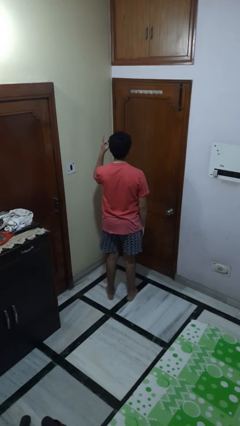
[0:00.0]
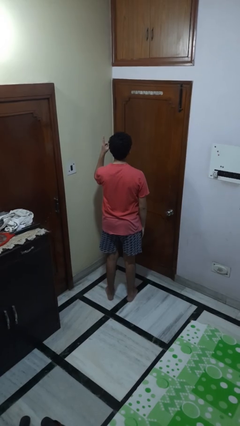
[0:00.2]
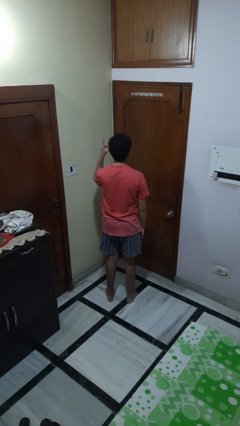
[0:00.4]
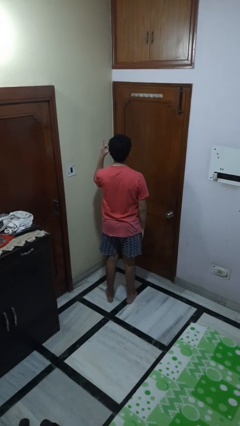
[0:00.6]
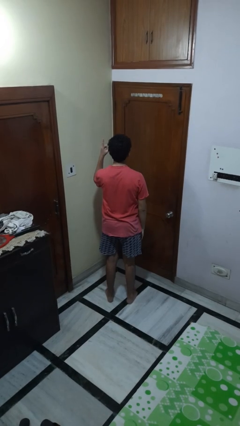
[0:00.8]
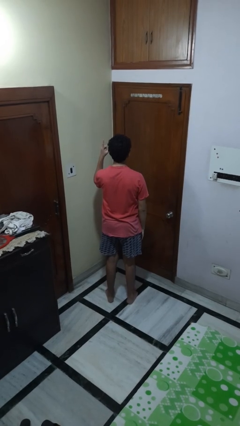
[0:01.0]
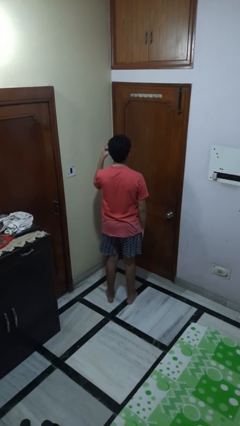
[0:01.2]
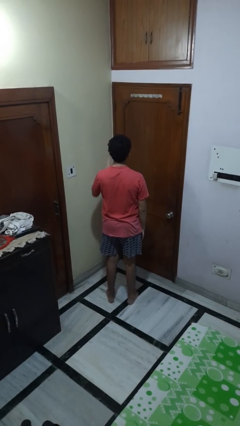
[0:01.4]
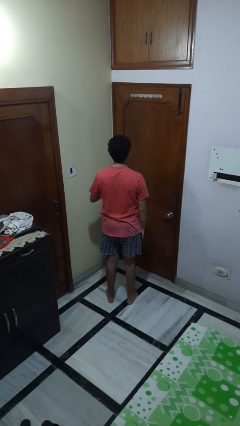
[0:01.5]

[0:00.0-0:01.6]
person gestures number one

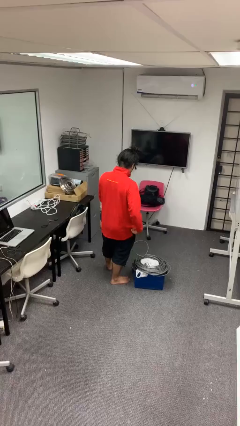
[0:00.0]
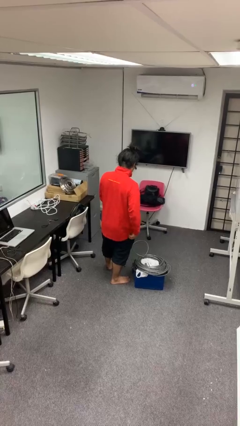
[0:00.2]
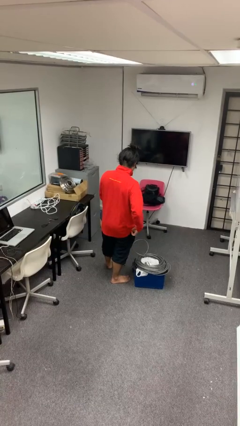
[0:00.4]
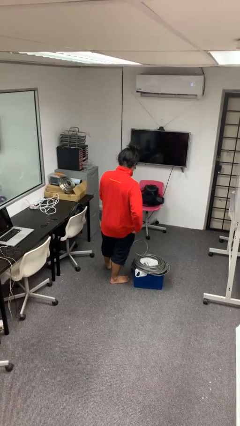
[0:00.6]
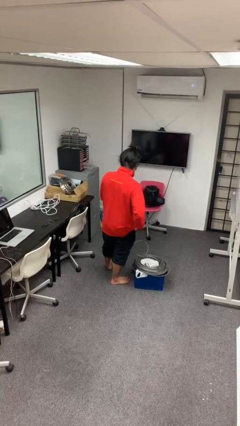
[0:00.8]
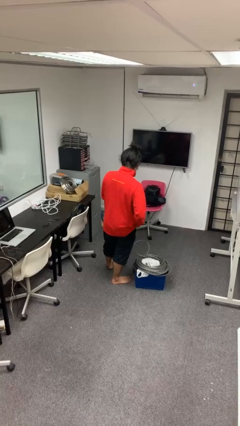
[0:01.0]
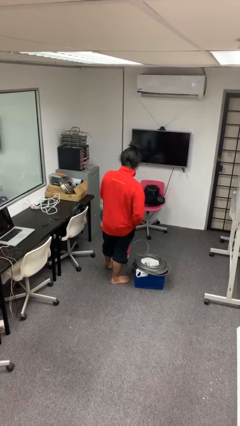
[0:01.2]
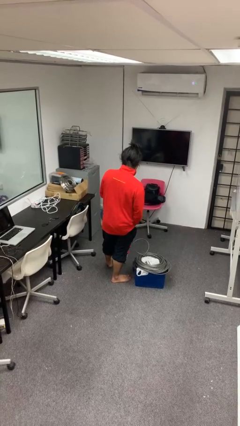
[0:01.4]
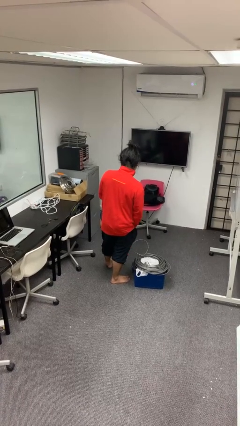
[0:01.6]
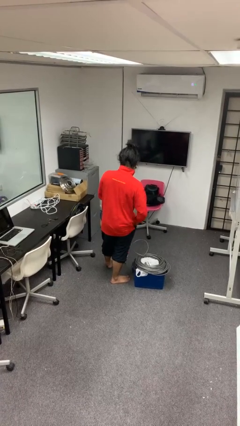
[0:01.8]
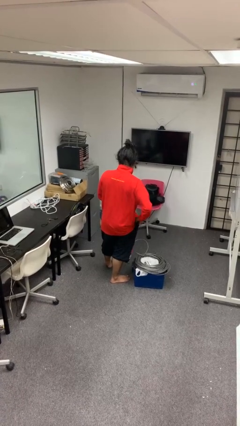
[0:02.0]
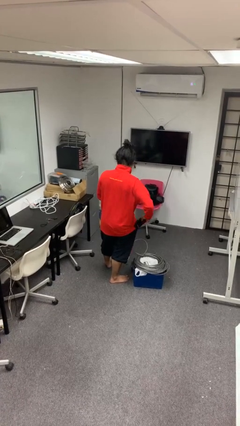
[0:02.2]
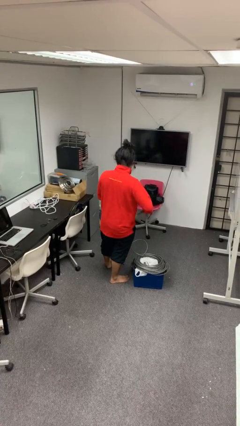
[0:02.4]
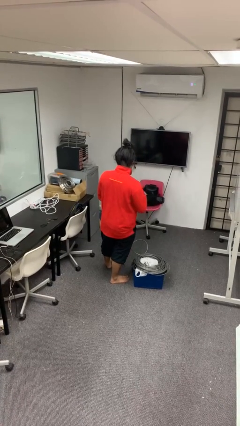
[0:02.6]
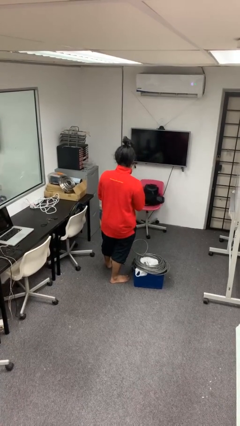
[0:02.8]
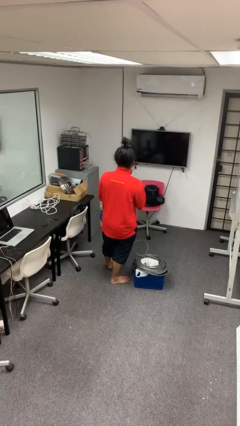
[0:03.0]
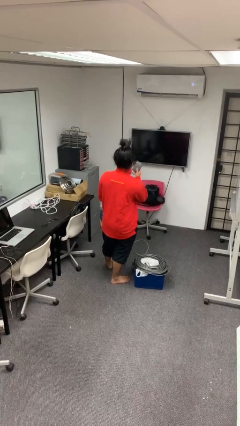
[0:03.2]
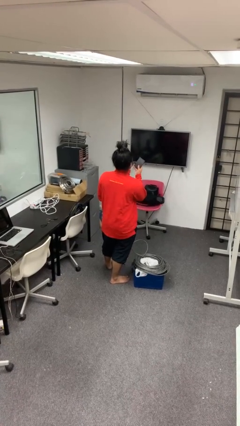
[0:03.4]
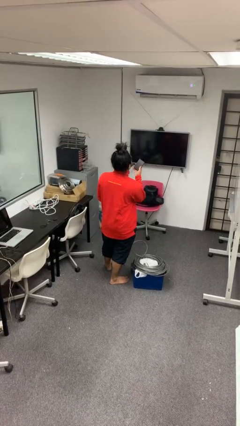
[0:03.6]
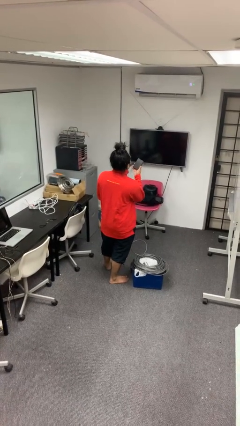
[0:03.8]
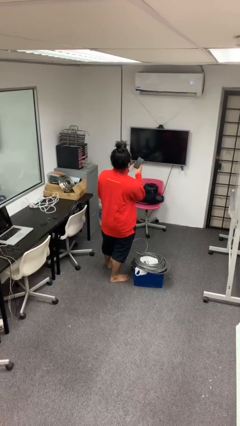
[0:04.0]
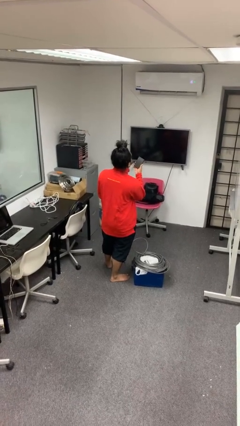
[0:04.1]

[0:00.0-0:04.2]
person takes phone from pocket

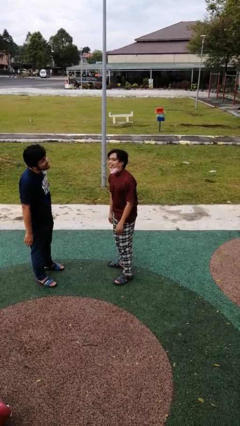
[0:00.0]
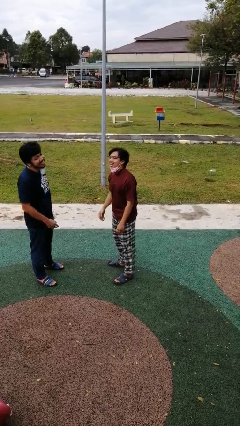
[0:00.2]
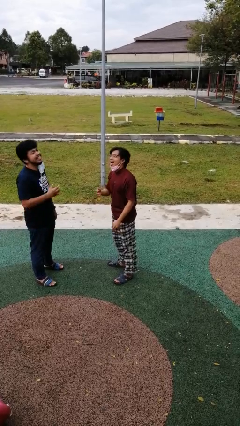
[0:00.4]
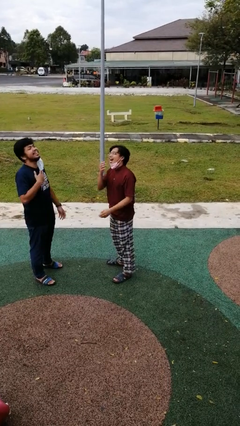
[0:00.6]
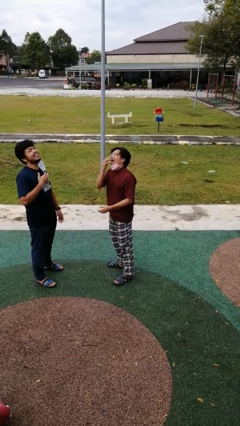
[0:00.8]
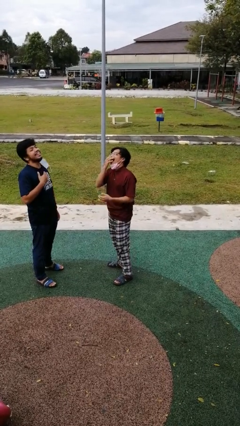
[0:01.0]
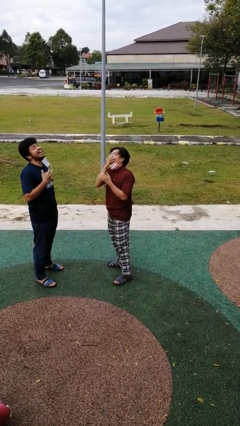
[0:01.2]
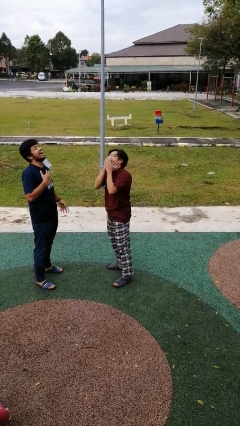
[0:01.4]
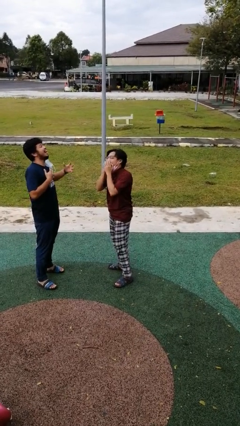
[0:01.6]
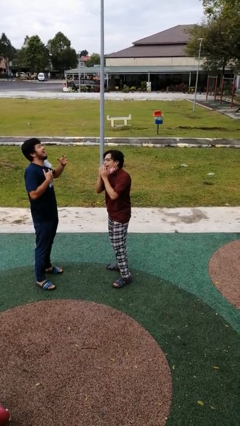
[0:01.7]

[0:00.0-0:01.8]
person laughs with person

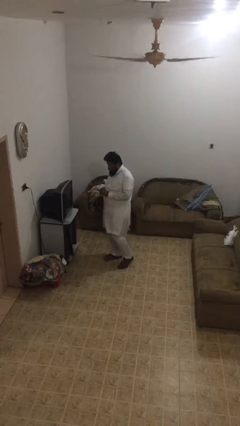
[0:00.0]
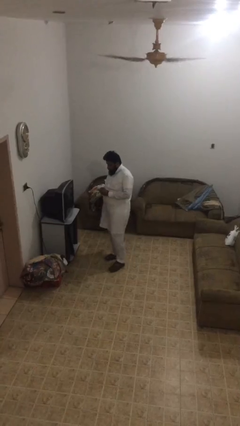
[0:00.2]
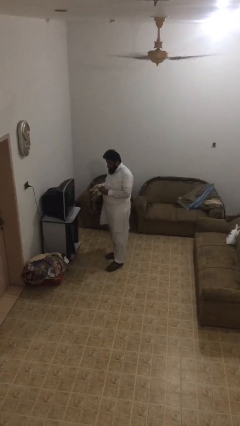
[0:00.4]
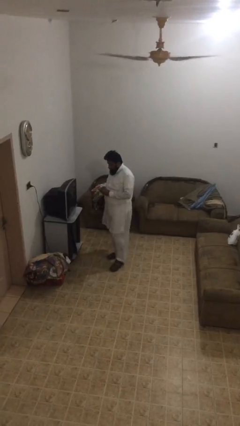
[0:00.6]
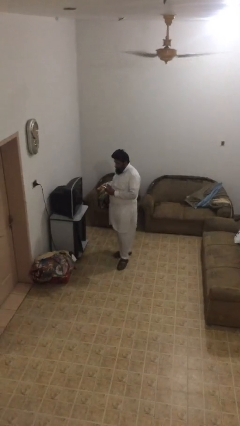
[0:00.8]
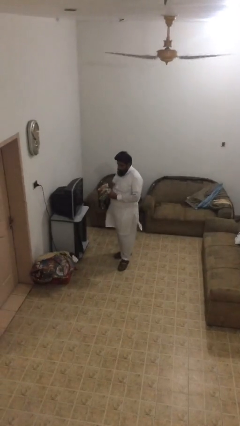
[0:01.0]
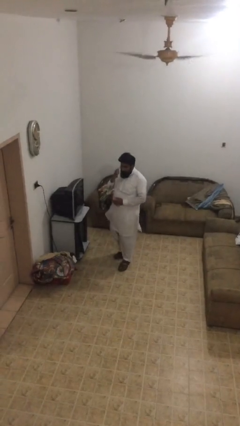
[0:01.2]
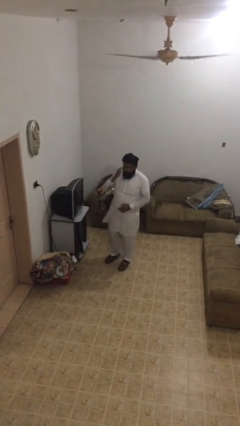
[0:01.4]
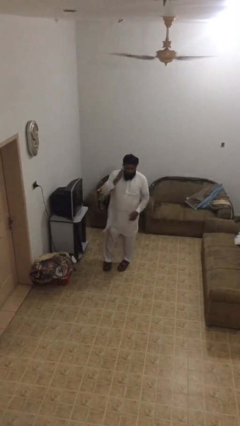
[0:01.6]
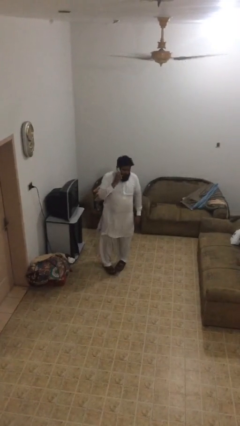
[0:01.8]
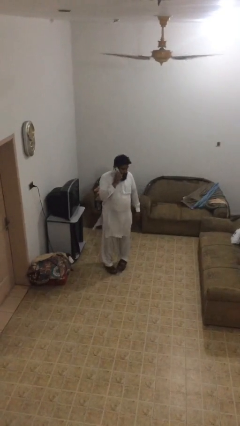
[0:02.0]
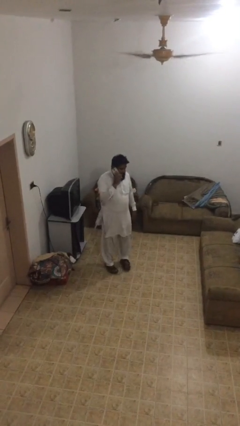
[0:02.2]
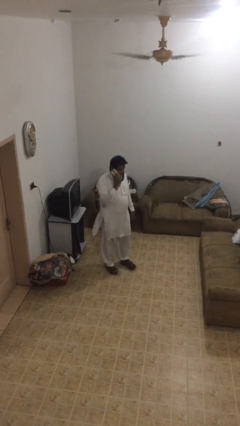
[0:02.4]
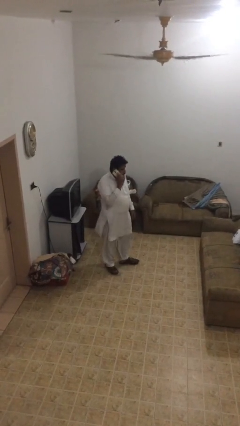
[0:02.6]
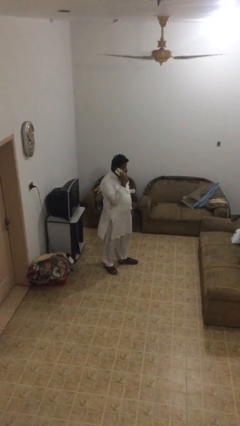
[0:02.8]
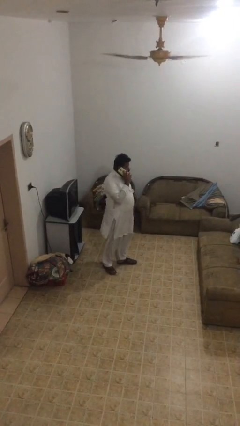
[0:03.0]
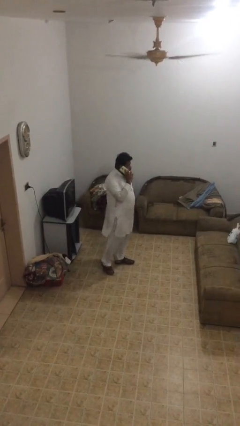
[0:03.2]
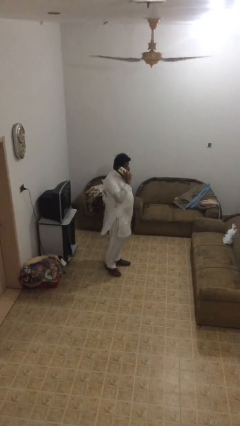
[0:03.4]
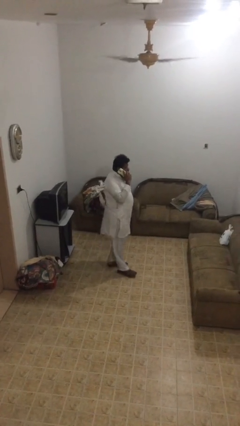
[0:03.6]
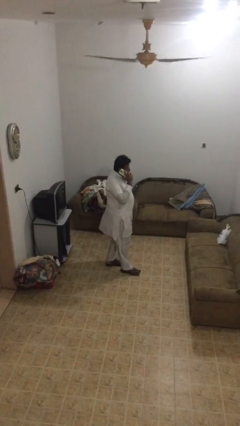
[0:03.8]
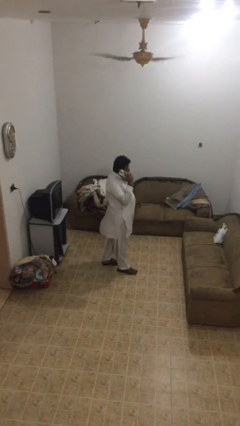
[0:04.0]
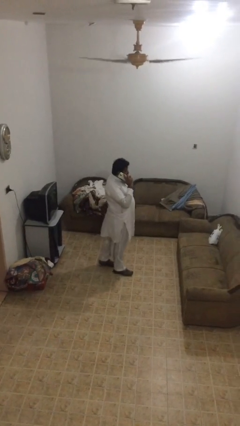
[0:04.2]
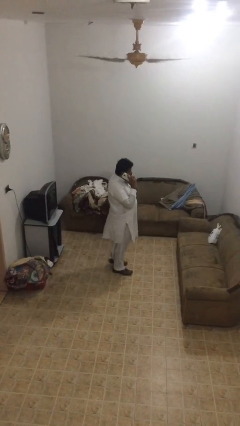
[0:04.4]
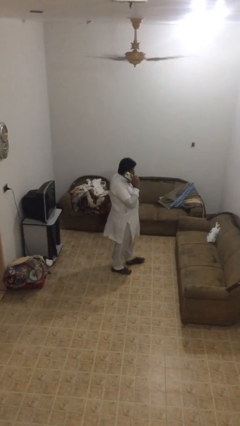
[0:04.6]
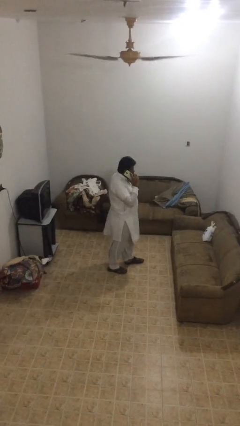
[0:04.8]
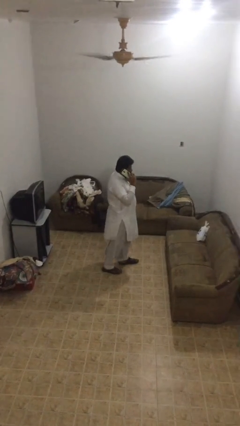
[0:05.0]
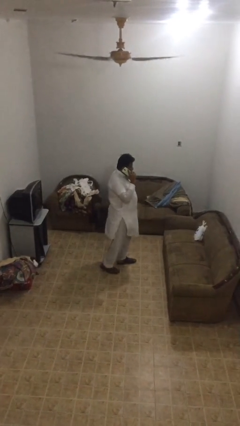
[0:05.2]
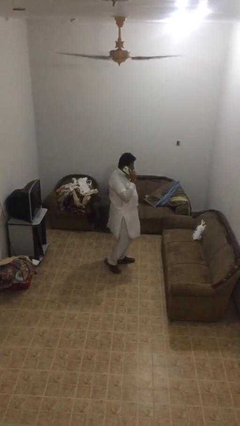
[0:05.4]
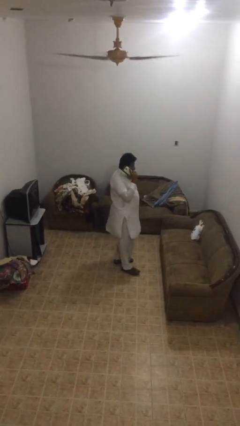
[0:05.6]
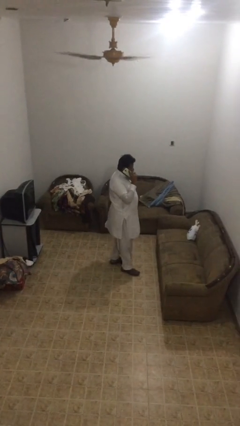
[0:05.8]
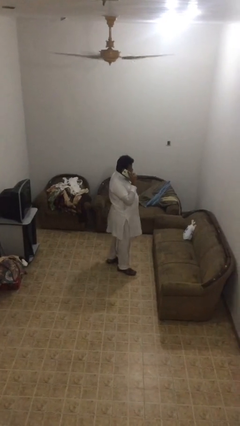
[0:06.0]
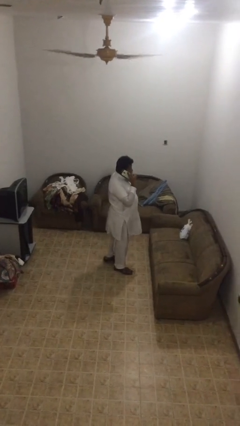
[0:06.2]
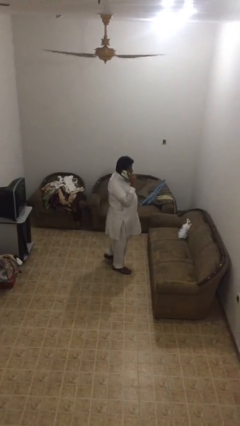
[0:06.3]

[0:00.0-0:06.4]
person talks on phone

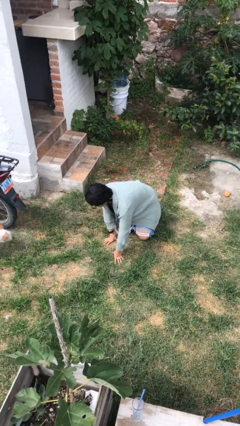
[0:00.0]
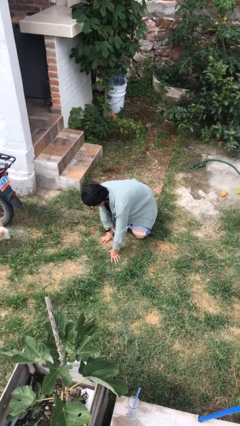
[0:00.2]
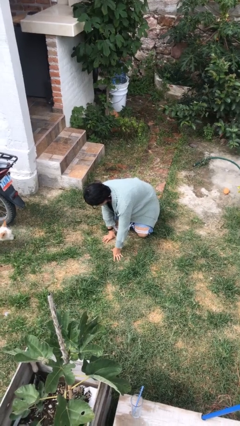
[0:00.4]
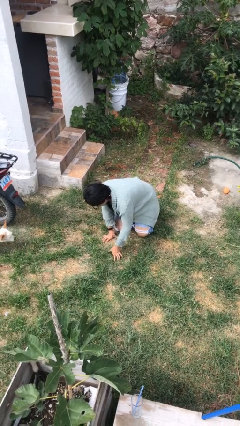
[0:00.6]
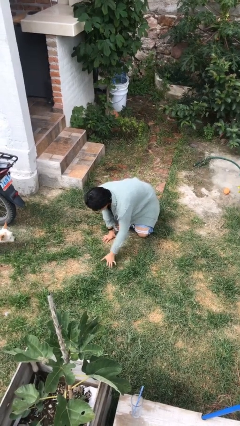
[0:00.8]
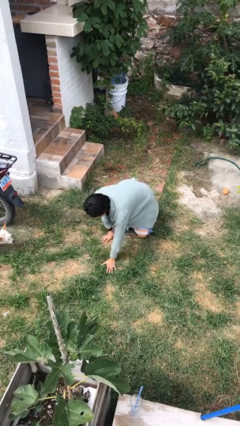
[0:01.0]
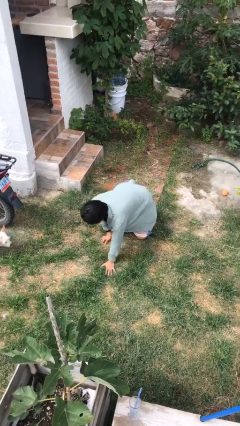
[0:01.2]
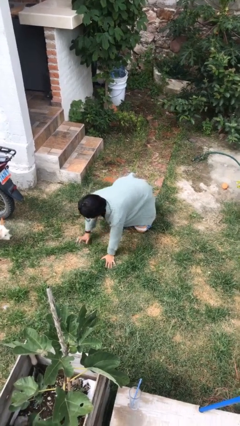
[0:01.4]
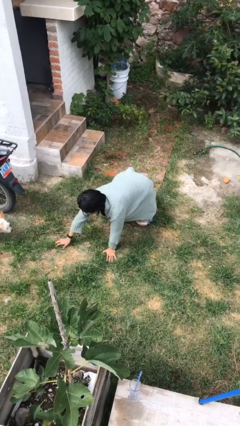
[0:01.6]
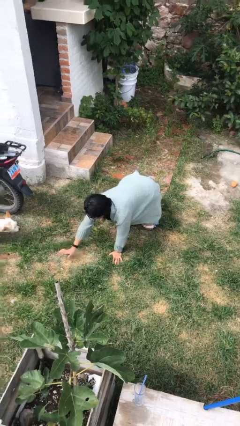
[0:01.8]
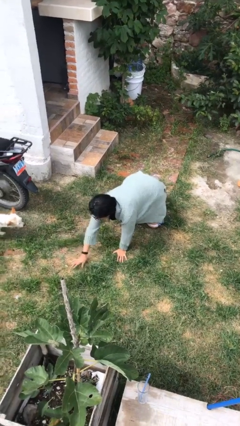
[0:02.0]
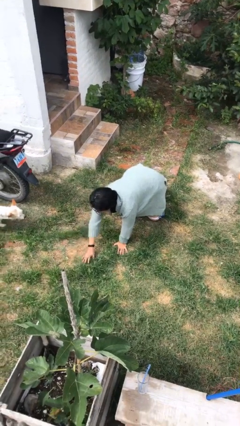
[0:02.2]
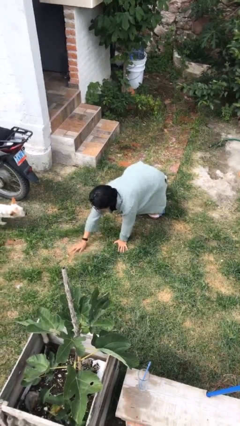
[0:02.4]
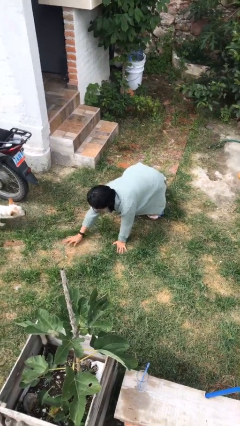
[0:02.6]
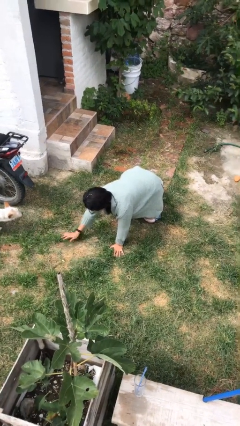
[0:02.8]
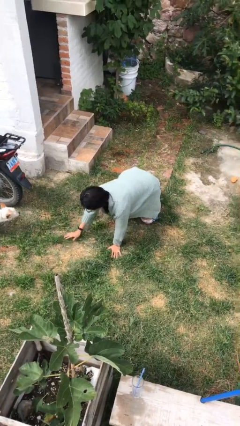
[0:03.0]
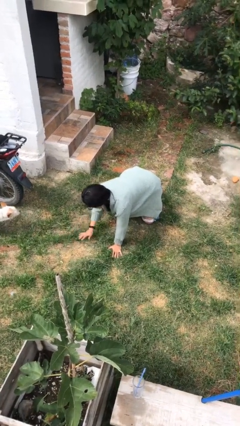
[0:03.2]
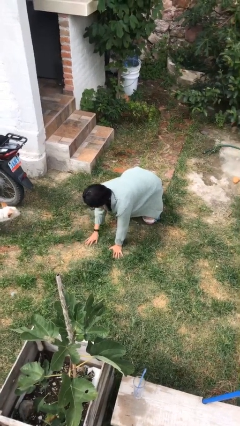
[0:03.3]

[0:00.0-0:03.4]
person crawls

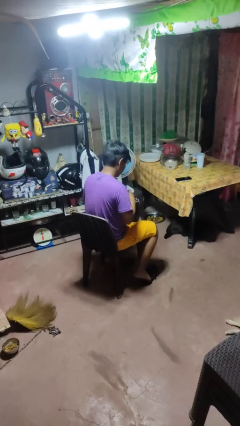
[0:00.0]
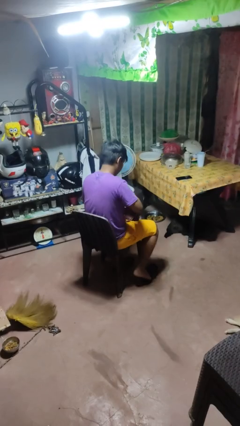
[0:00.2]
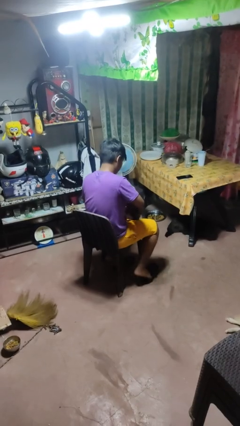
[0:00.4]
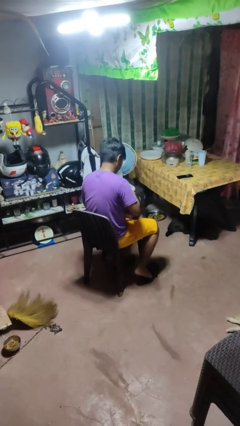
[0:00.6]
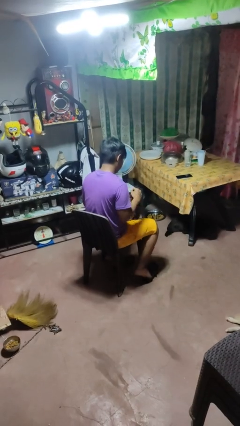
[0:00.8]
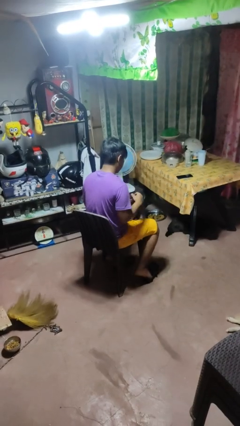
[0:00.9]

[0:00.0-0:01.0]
person puts object into purse
